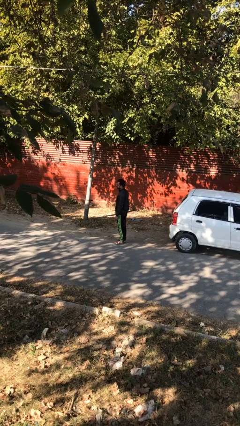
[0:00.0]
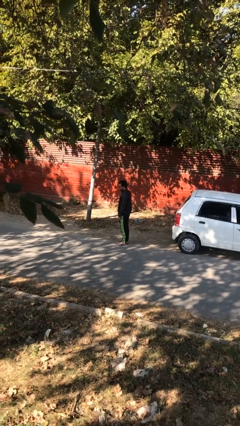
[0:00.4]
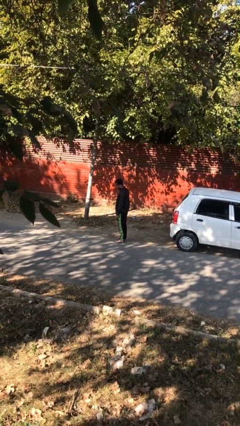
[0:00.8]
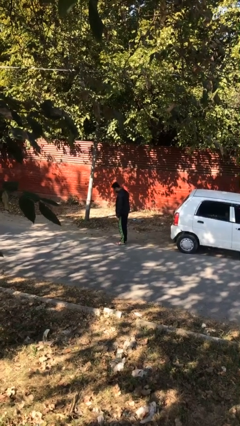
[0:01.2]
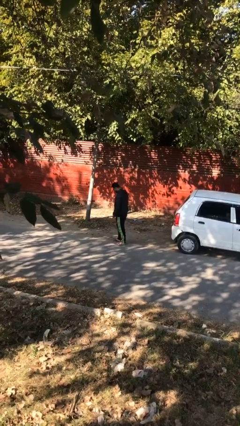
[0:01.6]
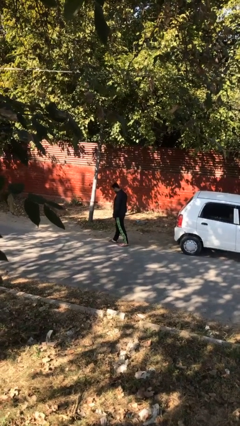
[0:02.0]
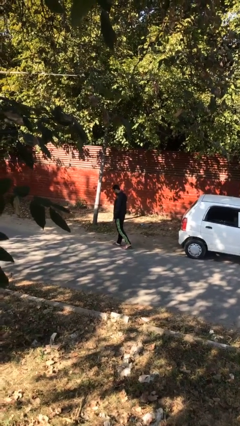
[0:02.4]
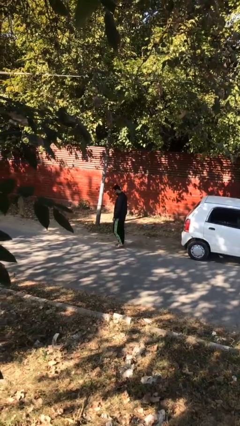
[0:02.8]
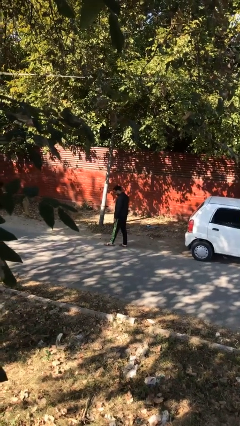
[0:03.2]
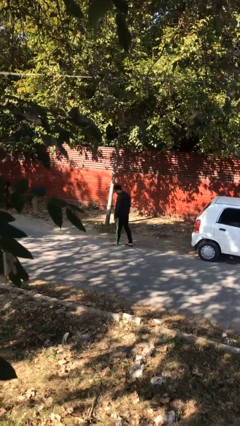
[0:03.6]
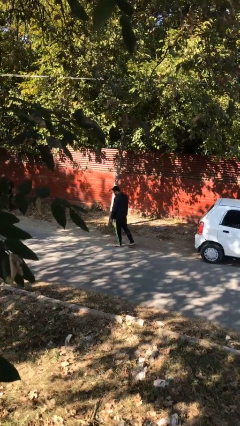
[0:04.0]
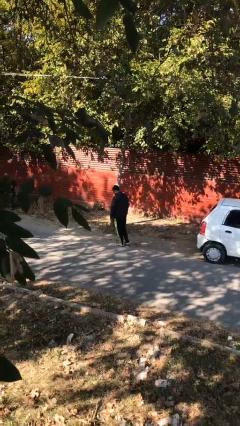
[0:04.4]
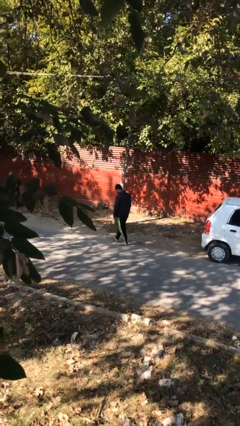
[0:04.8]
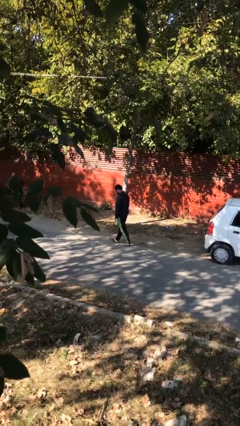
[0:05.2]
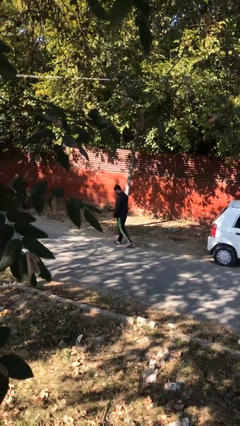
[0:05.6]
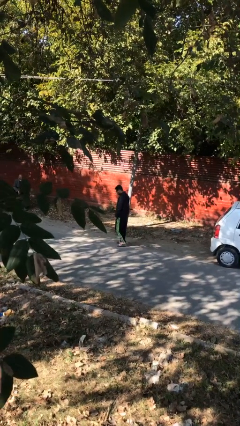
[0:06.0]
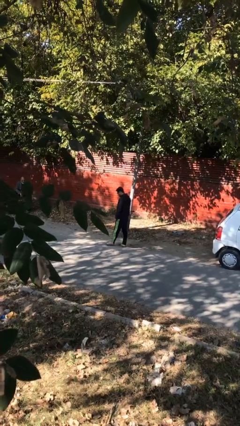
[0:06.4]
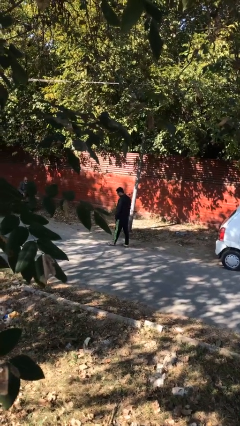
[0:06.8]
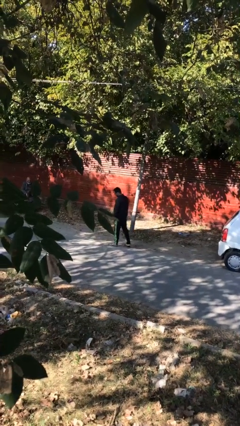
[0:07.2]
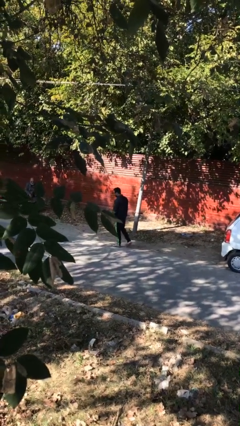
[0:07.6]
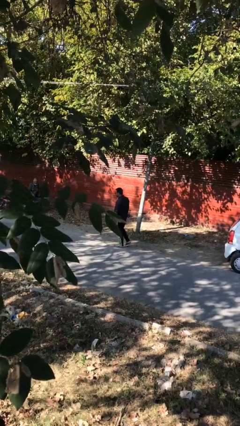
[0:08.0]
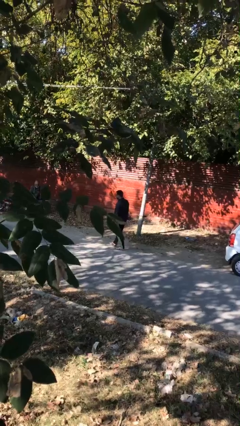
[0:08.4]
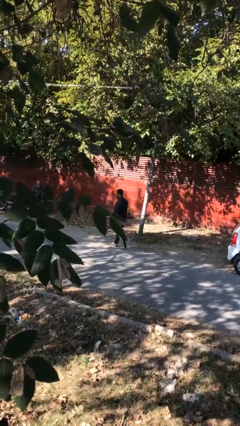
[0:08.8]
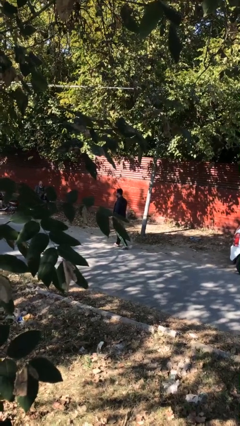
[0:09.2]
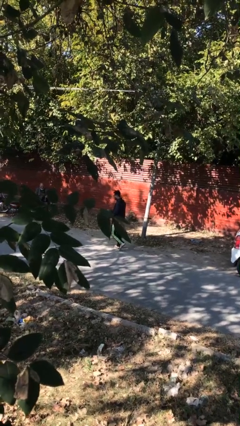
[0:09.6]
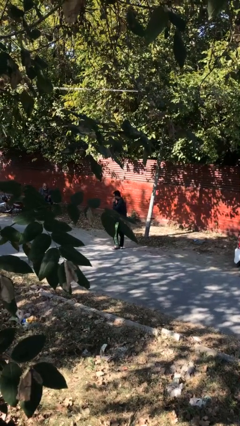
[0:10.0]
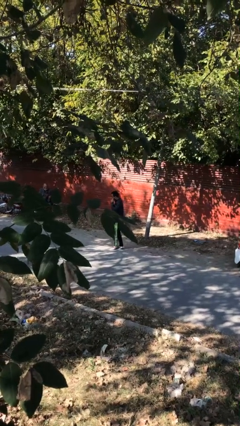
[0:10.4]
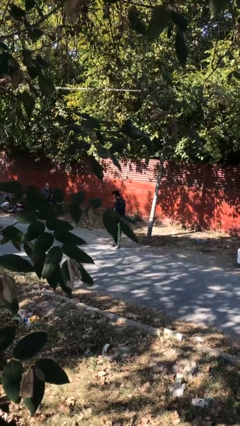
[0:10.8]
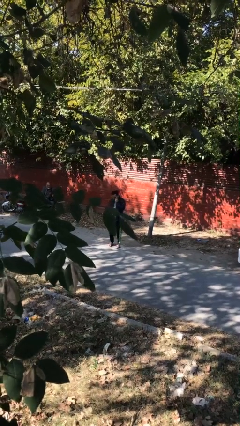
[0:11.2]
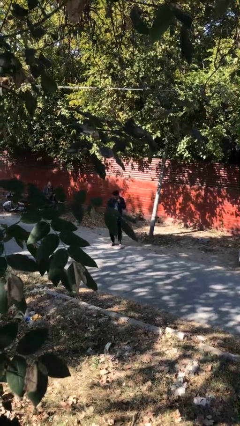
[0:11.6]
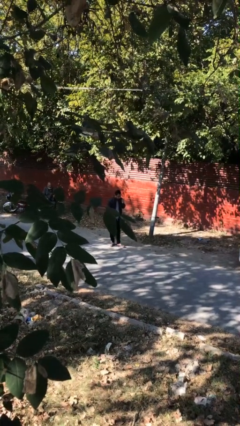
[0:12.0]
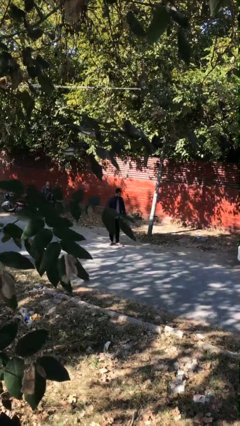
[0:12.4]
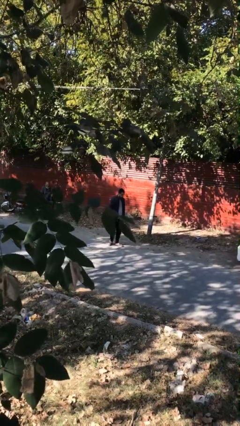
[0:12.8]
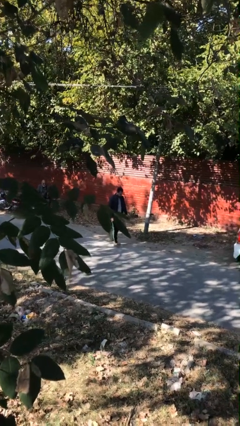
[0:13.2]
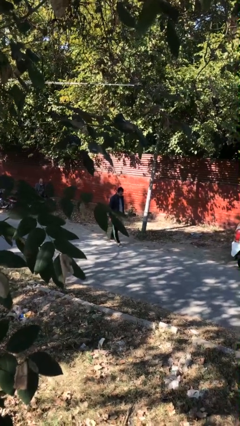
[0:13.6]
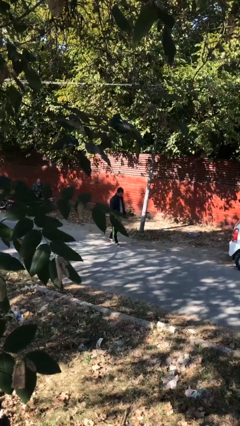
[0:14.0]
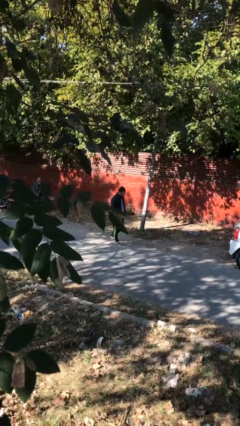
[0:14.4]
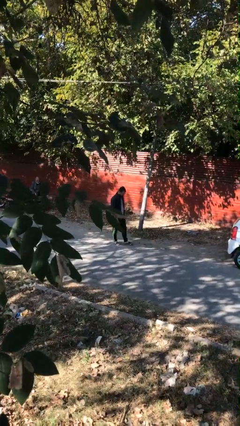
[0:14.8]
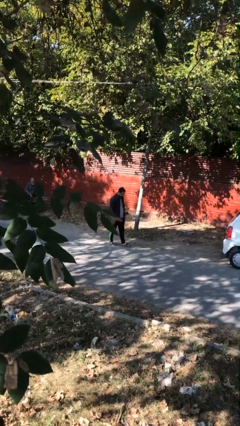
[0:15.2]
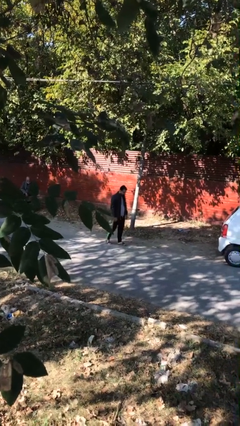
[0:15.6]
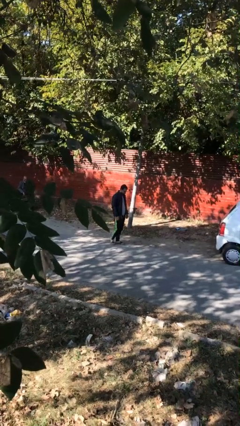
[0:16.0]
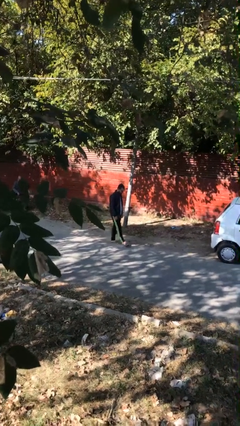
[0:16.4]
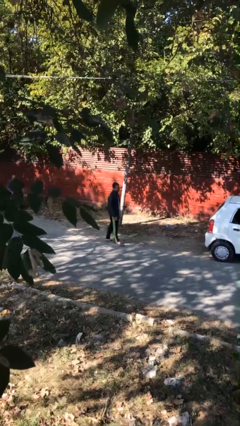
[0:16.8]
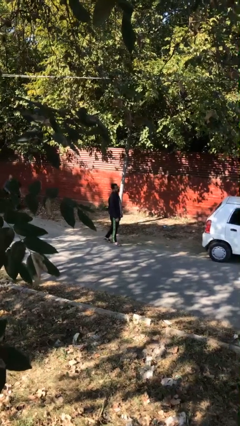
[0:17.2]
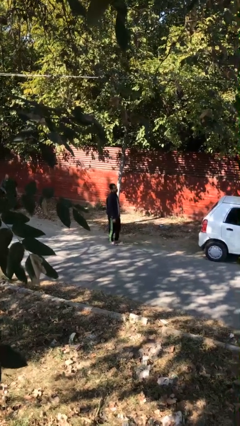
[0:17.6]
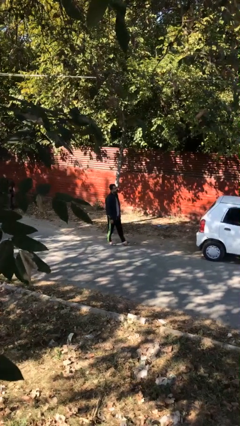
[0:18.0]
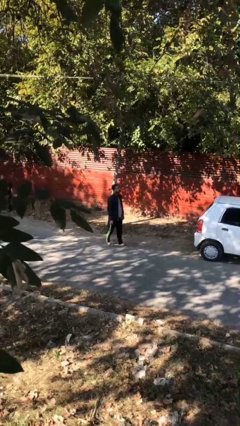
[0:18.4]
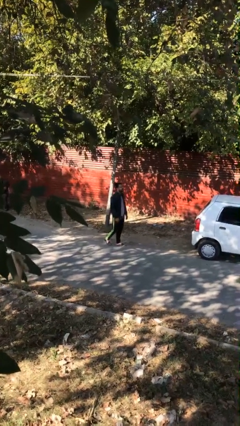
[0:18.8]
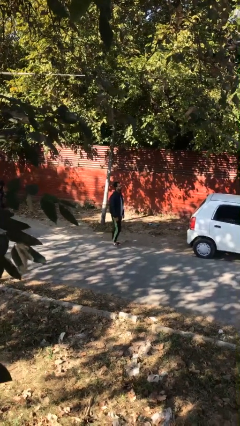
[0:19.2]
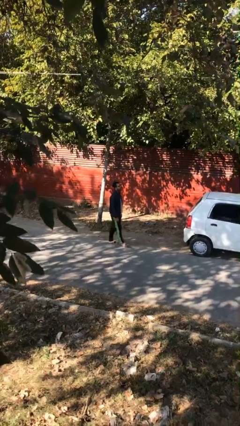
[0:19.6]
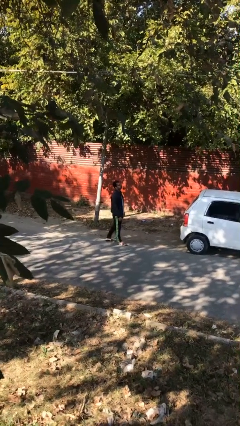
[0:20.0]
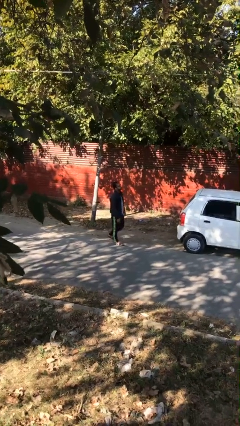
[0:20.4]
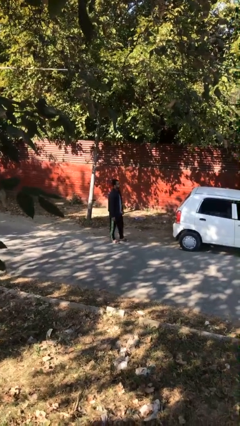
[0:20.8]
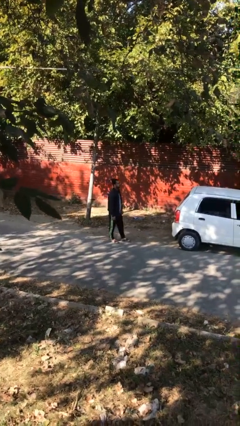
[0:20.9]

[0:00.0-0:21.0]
person walks

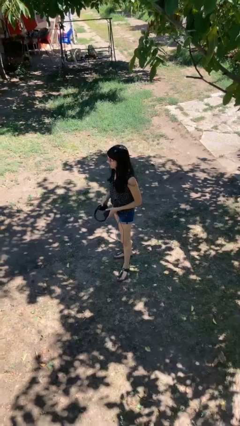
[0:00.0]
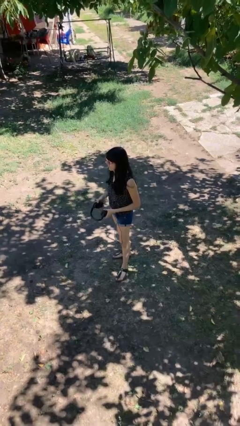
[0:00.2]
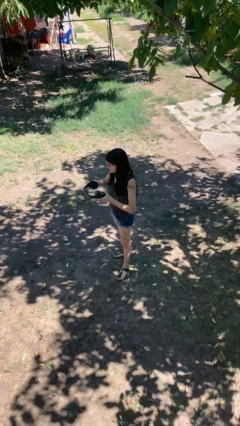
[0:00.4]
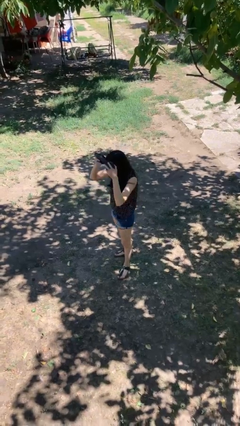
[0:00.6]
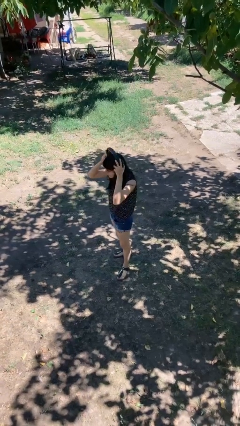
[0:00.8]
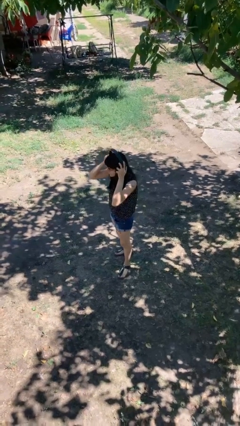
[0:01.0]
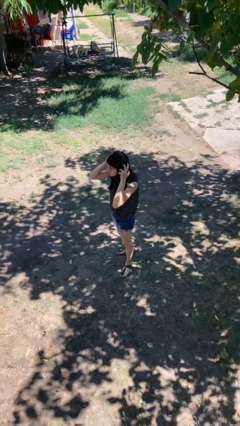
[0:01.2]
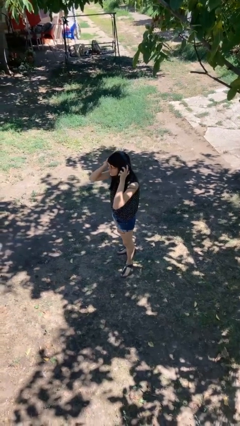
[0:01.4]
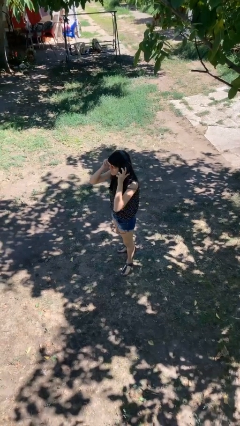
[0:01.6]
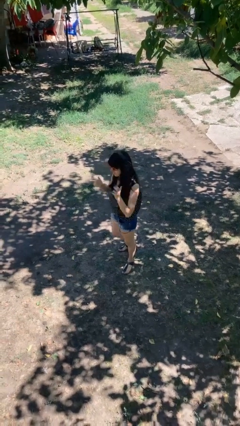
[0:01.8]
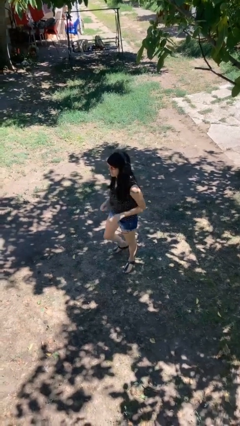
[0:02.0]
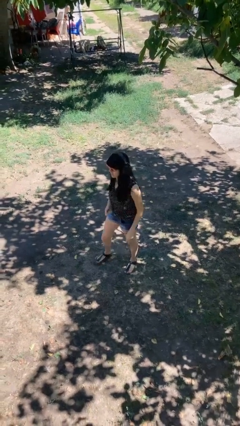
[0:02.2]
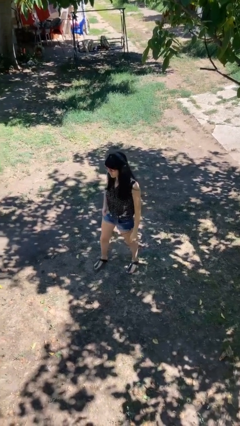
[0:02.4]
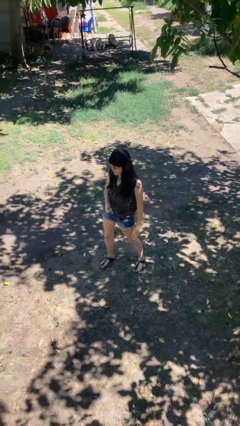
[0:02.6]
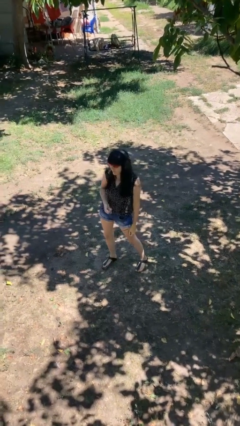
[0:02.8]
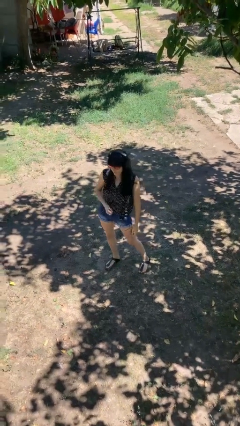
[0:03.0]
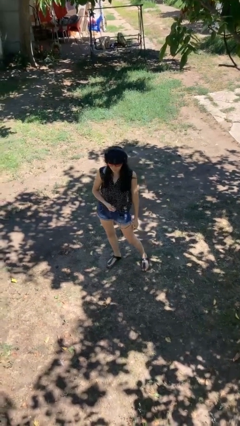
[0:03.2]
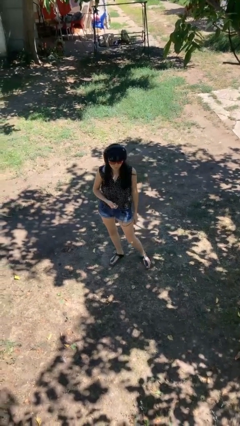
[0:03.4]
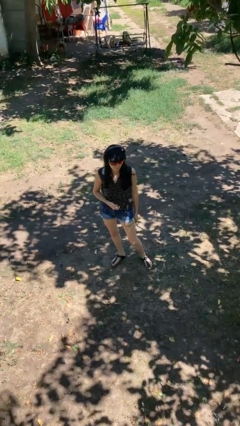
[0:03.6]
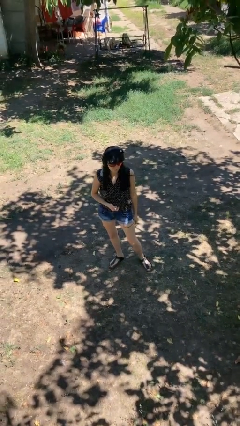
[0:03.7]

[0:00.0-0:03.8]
person puts on headphones

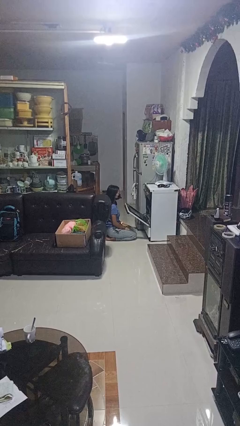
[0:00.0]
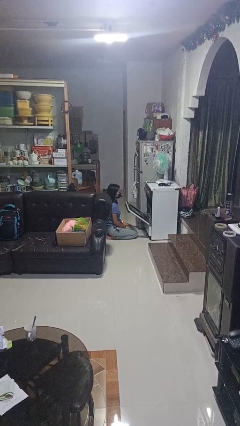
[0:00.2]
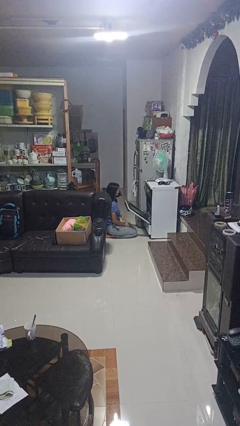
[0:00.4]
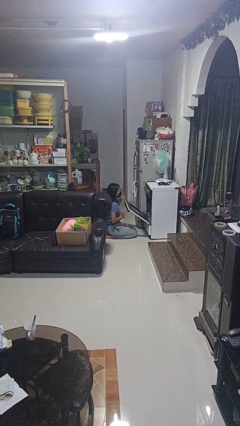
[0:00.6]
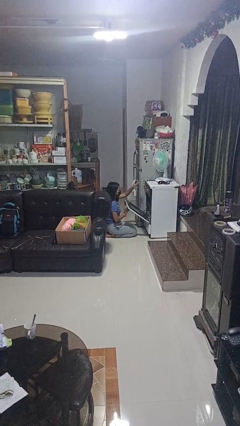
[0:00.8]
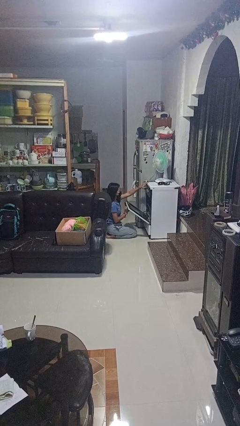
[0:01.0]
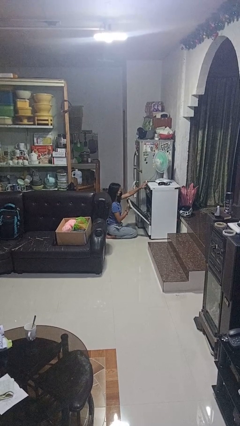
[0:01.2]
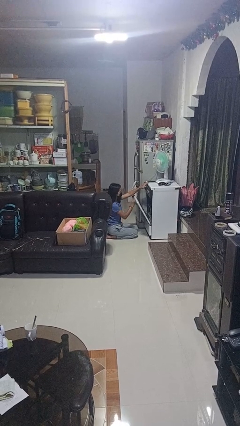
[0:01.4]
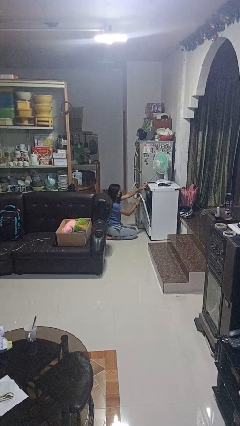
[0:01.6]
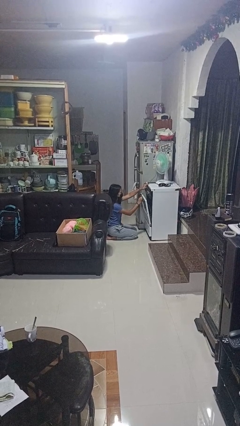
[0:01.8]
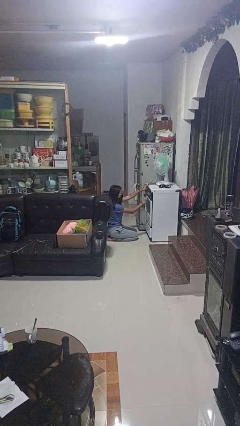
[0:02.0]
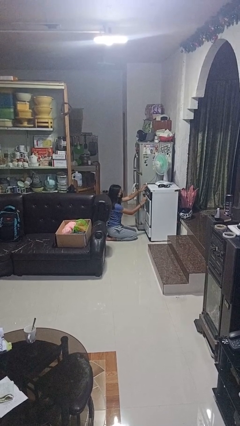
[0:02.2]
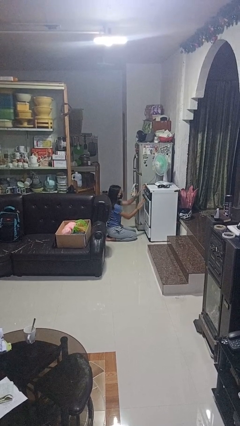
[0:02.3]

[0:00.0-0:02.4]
person closes oven door

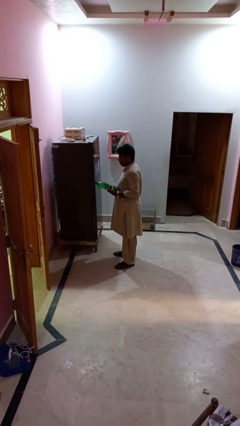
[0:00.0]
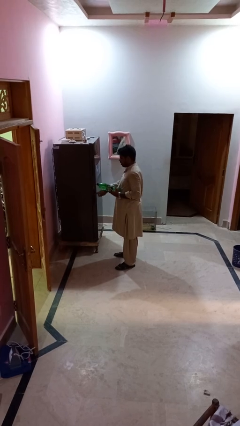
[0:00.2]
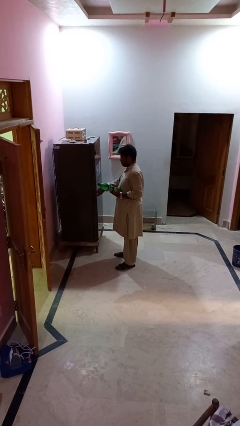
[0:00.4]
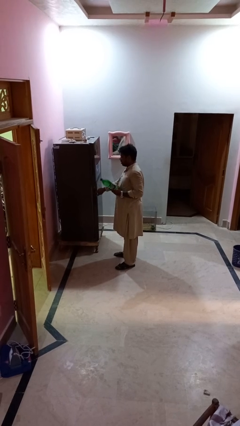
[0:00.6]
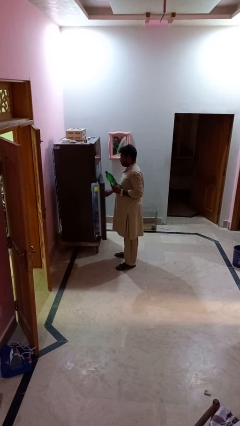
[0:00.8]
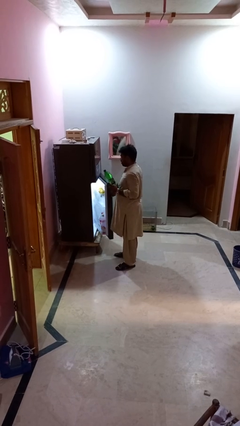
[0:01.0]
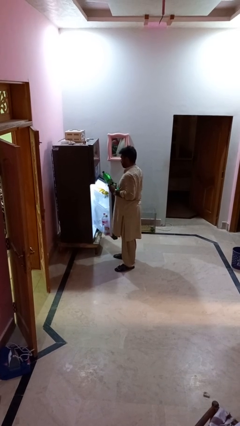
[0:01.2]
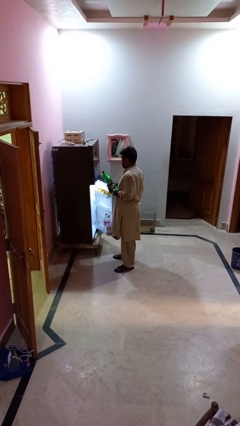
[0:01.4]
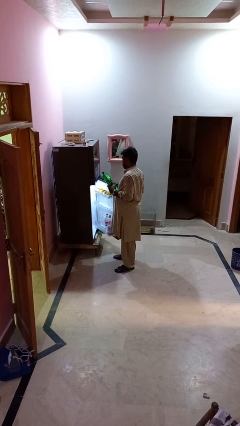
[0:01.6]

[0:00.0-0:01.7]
person opens refrigerator
